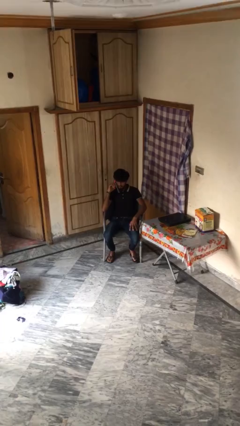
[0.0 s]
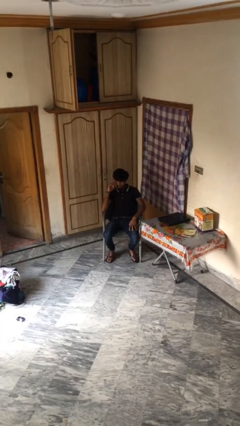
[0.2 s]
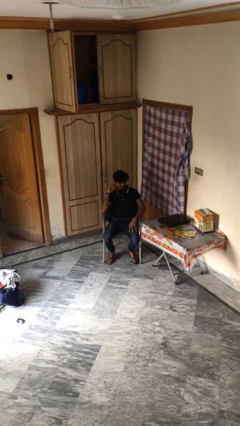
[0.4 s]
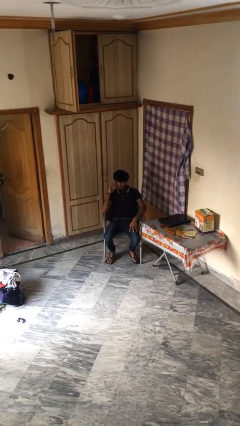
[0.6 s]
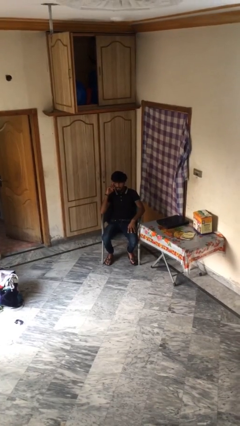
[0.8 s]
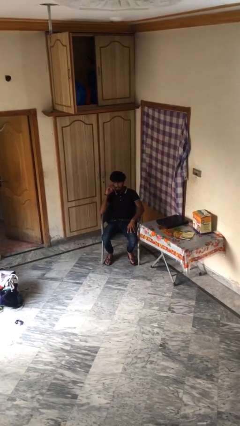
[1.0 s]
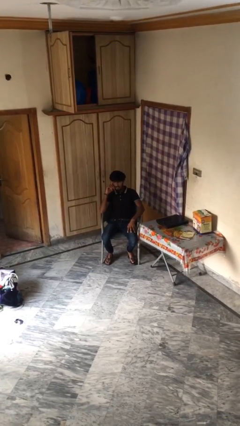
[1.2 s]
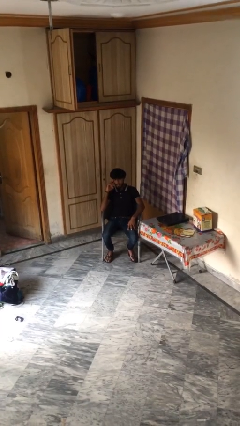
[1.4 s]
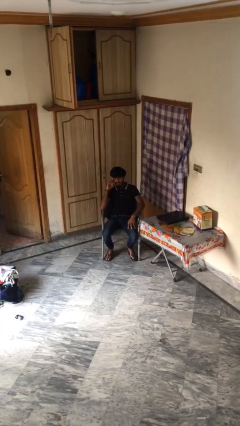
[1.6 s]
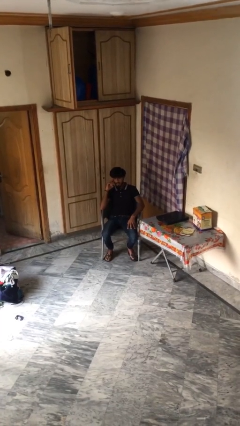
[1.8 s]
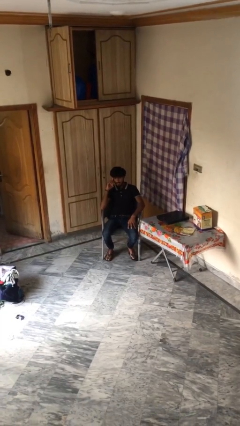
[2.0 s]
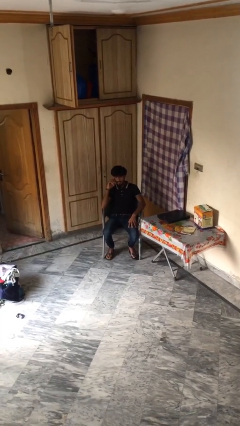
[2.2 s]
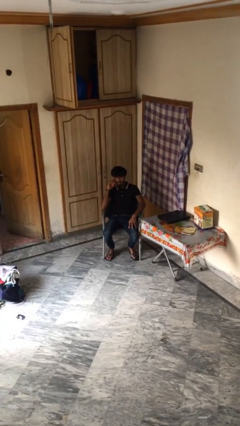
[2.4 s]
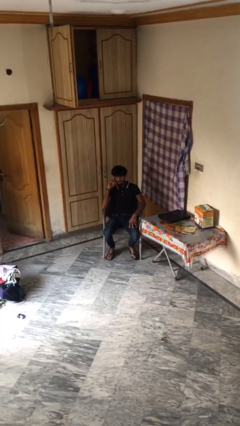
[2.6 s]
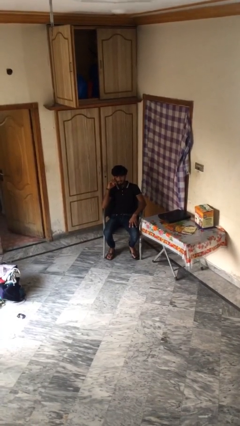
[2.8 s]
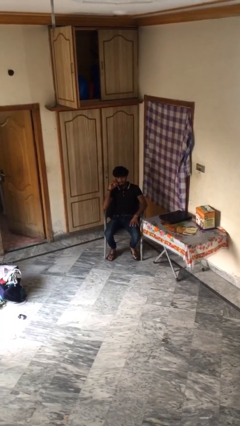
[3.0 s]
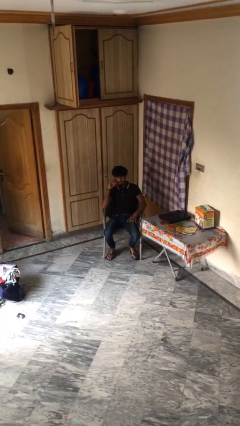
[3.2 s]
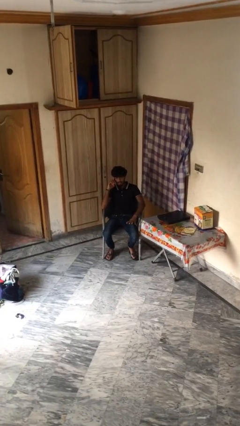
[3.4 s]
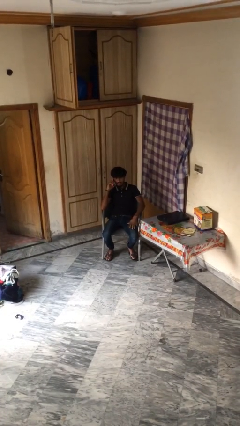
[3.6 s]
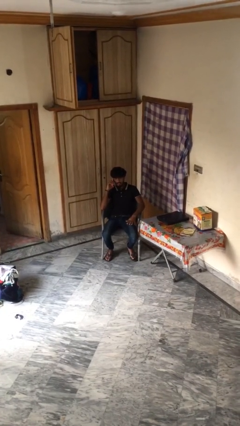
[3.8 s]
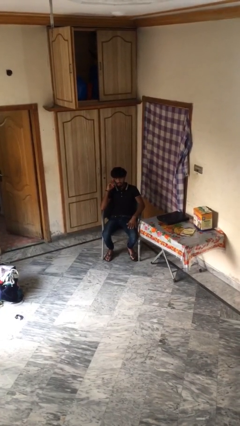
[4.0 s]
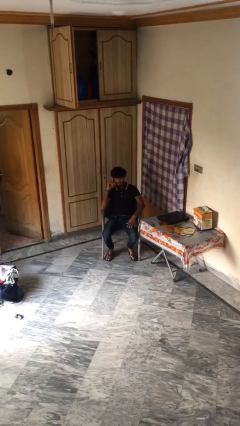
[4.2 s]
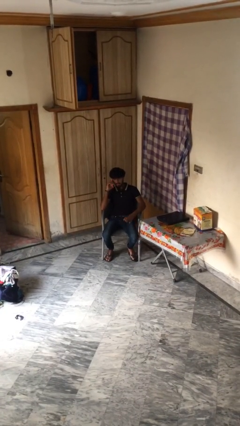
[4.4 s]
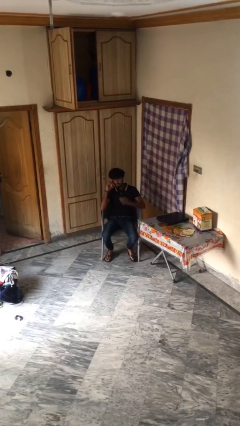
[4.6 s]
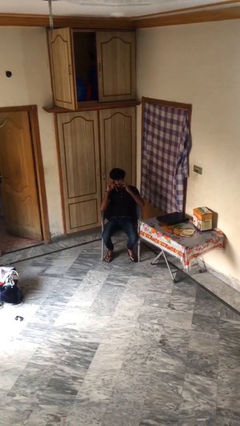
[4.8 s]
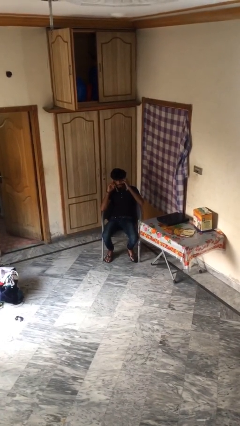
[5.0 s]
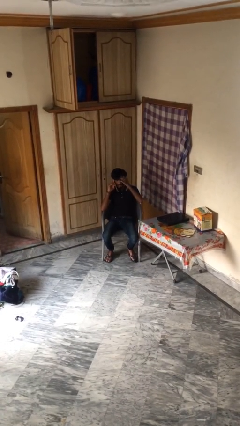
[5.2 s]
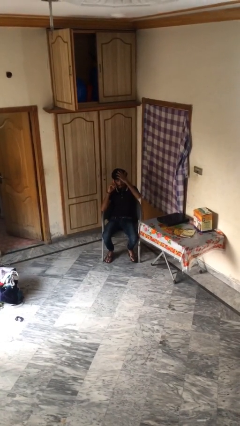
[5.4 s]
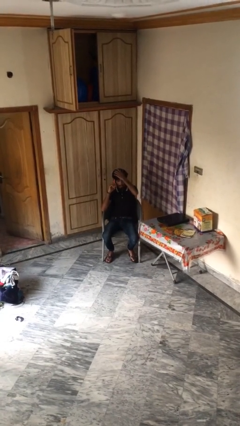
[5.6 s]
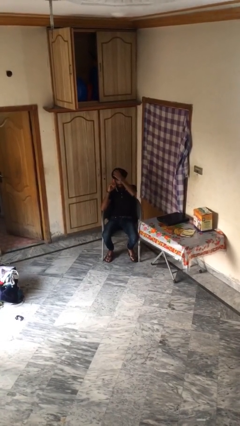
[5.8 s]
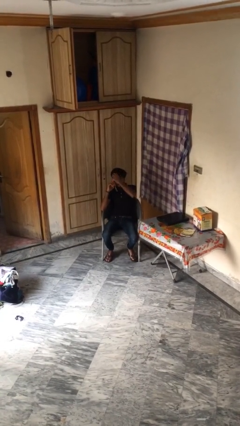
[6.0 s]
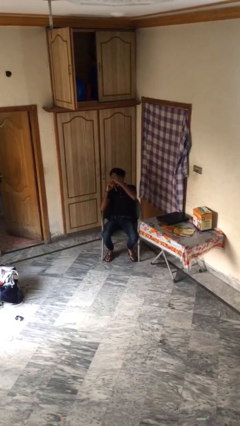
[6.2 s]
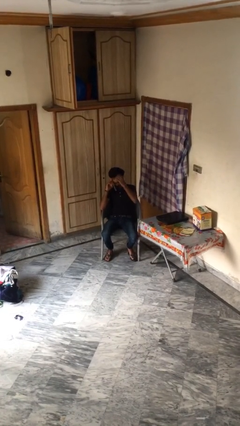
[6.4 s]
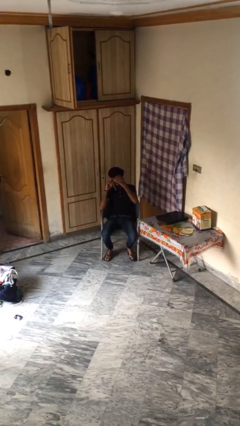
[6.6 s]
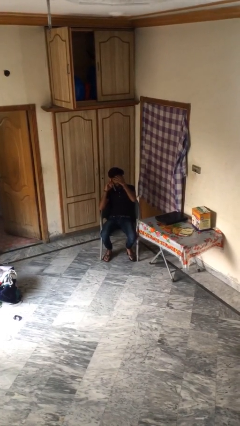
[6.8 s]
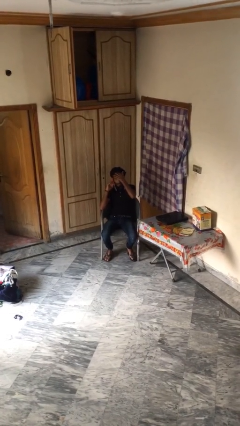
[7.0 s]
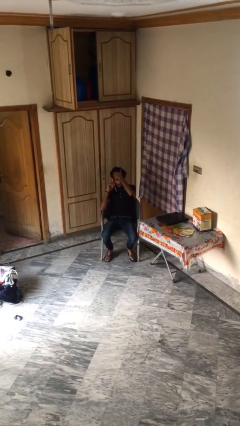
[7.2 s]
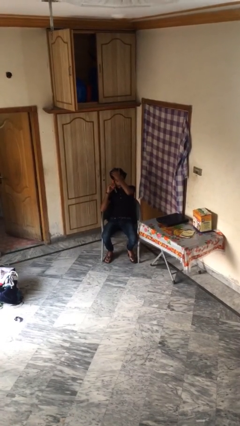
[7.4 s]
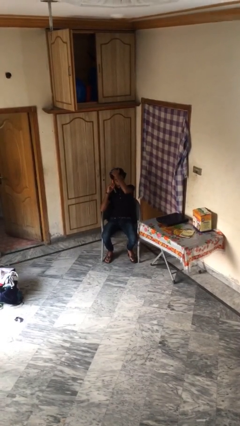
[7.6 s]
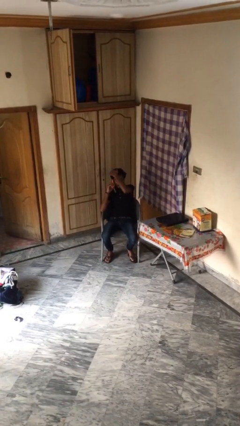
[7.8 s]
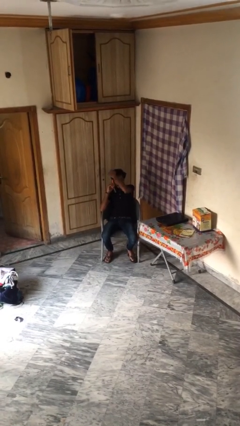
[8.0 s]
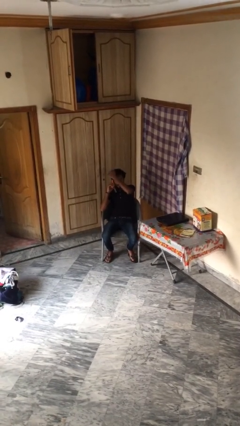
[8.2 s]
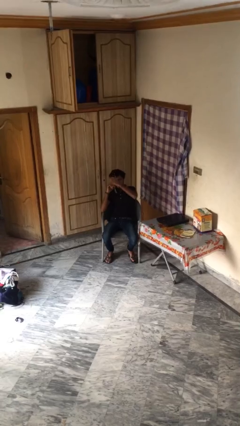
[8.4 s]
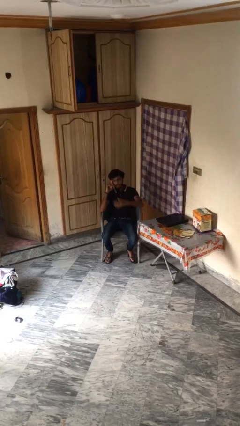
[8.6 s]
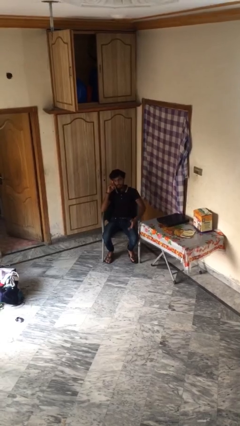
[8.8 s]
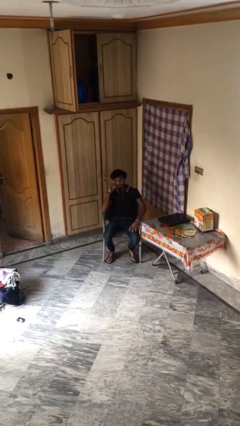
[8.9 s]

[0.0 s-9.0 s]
person talks on phone

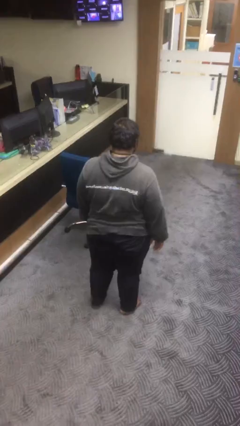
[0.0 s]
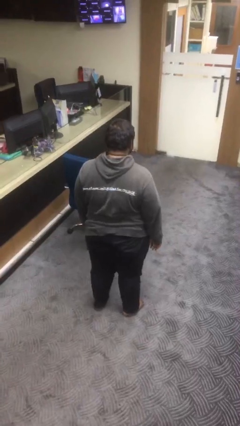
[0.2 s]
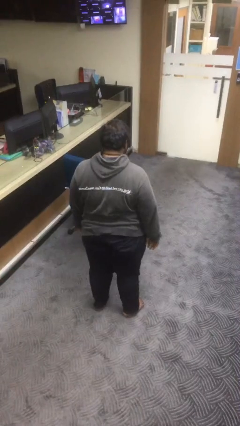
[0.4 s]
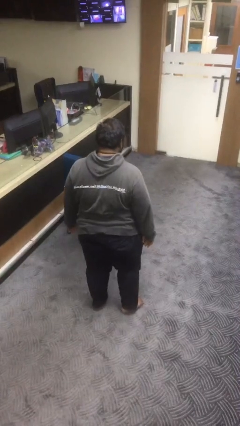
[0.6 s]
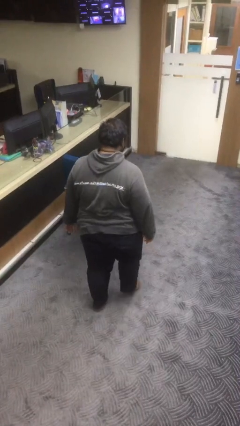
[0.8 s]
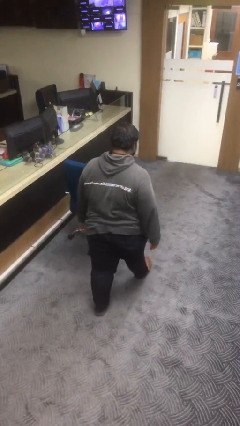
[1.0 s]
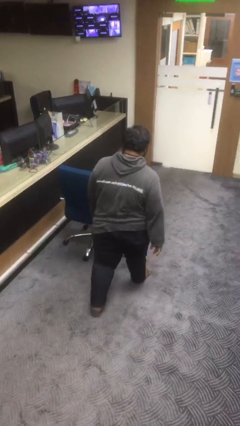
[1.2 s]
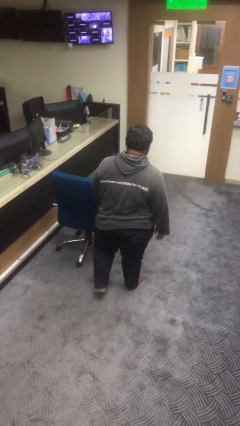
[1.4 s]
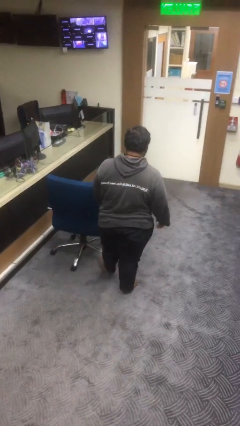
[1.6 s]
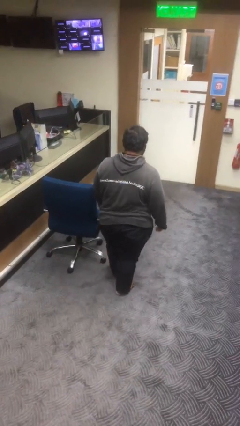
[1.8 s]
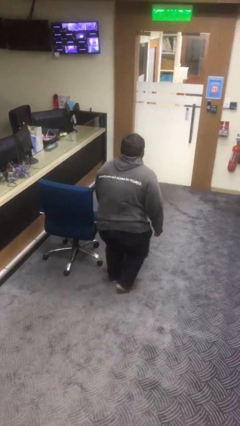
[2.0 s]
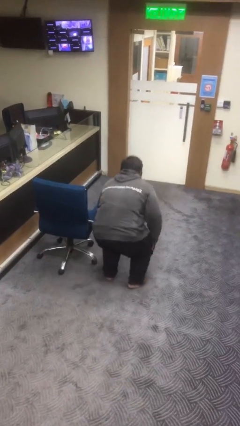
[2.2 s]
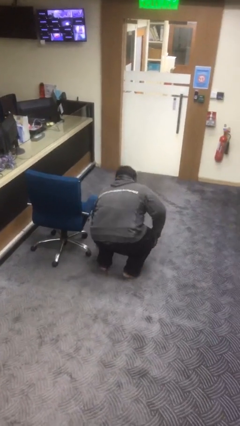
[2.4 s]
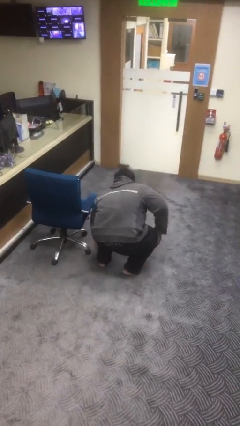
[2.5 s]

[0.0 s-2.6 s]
person stubs toe

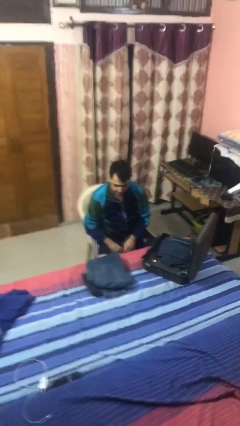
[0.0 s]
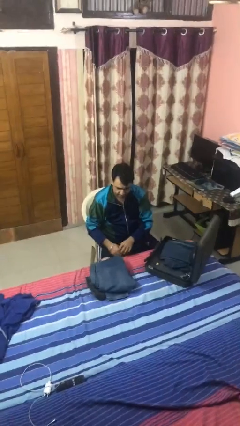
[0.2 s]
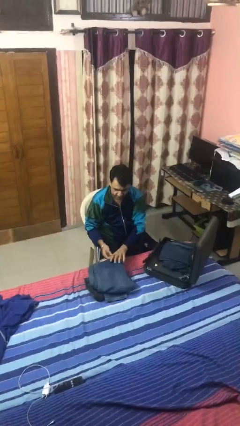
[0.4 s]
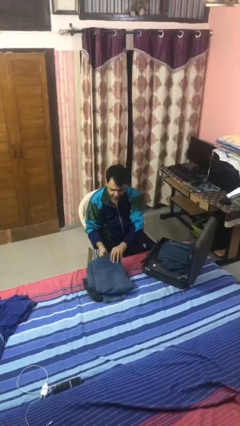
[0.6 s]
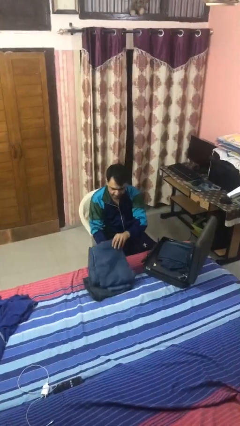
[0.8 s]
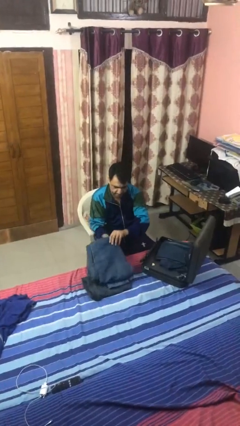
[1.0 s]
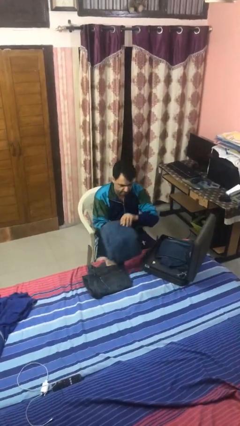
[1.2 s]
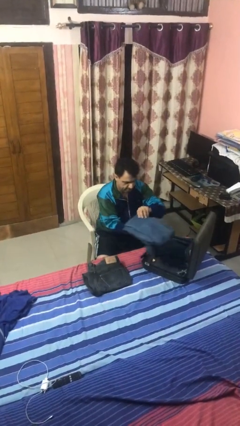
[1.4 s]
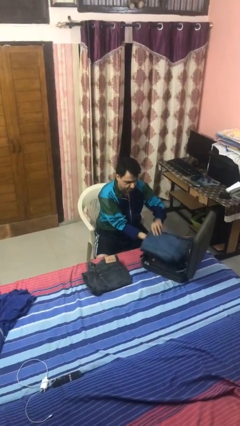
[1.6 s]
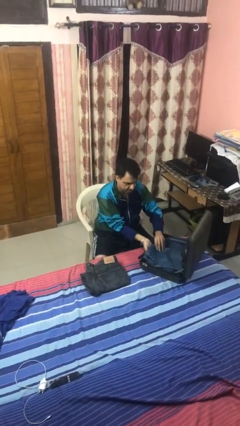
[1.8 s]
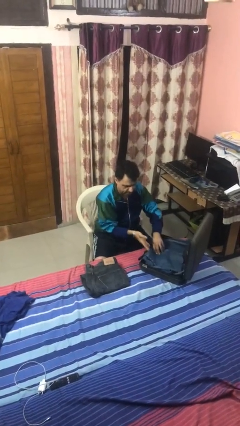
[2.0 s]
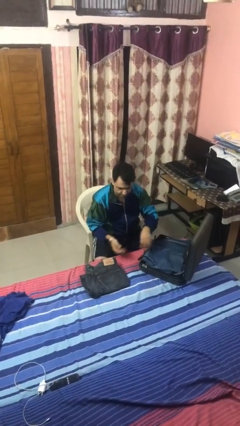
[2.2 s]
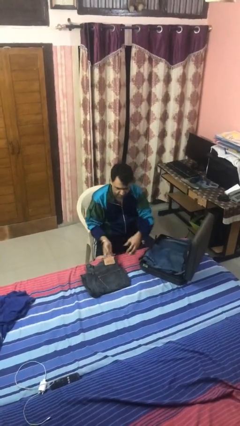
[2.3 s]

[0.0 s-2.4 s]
person loads clothes into suitcase

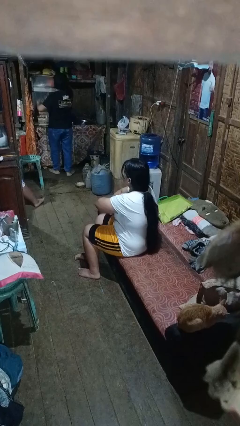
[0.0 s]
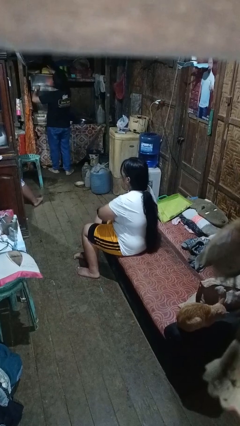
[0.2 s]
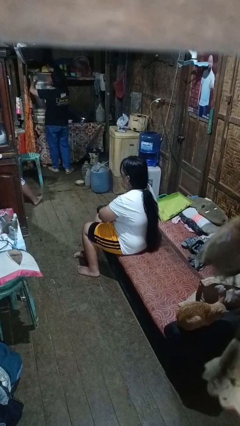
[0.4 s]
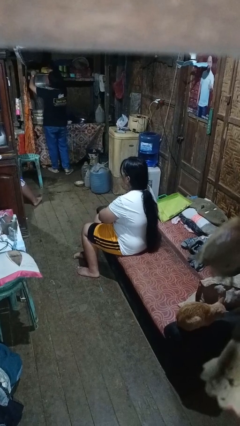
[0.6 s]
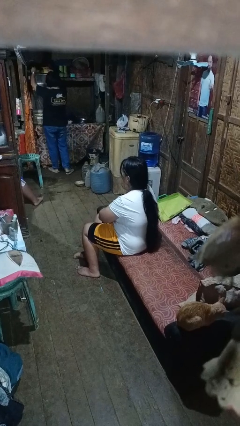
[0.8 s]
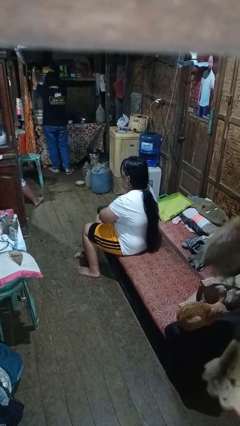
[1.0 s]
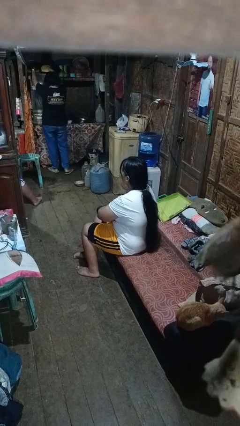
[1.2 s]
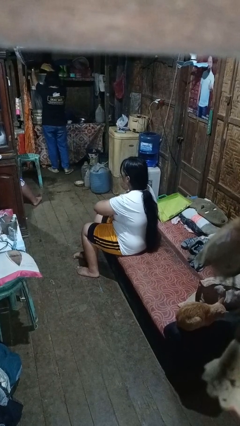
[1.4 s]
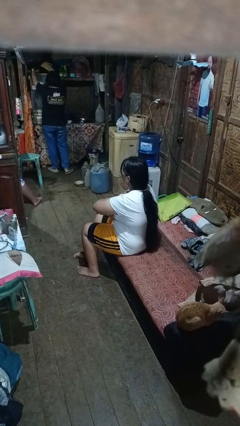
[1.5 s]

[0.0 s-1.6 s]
person gestures arms x

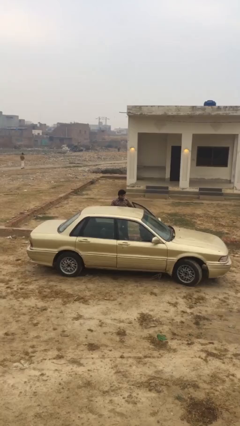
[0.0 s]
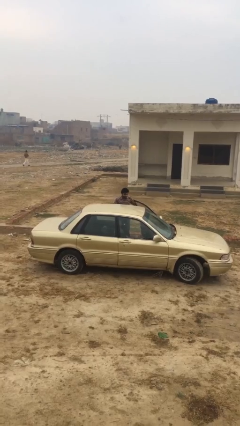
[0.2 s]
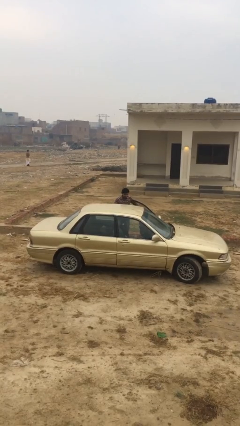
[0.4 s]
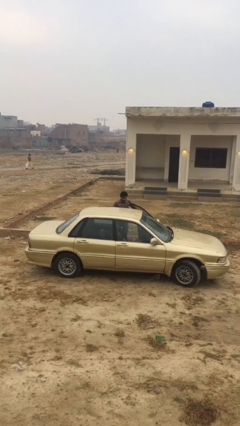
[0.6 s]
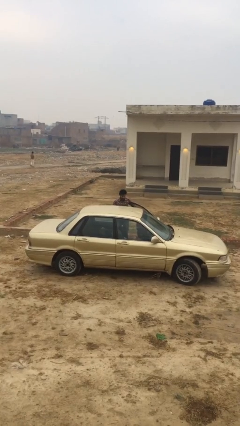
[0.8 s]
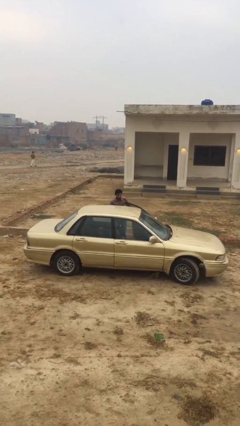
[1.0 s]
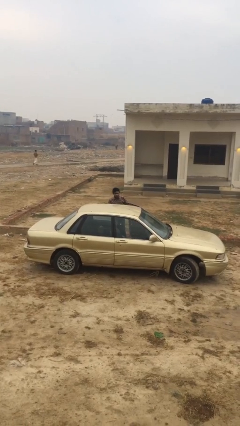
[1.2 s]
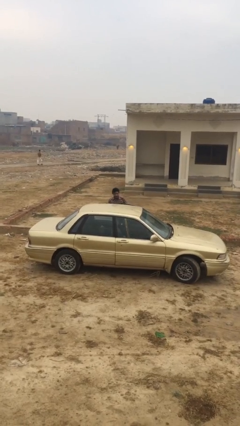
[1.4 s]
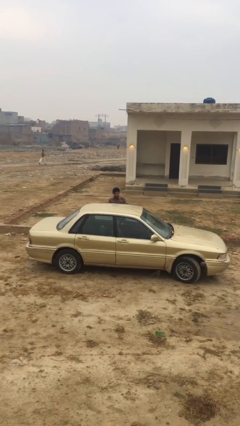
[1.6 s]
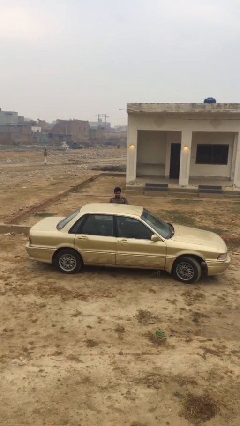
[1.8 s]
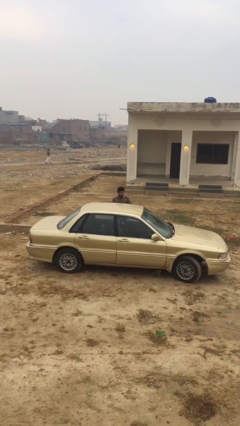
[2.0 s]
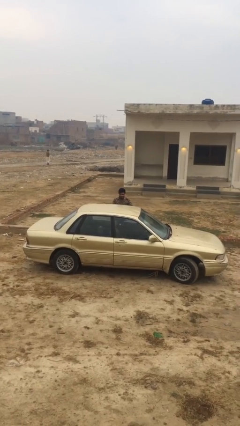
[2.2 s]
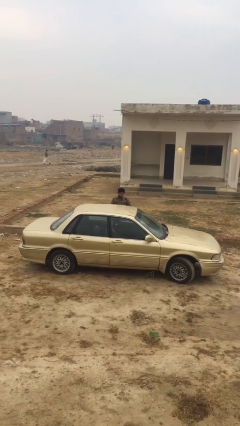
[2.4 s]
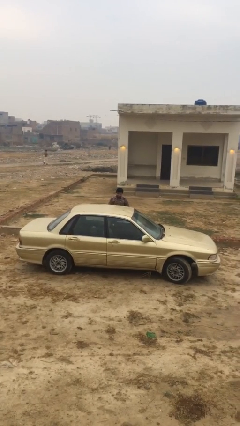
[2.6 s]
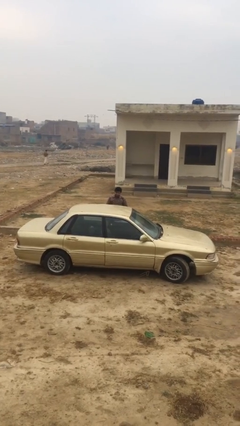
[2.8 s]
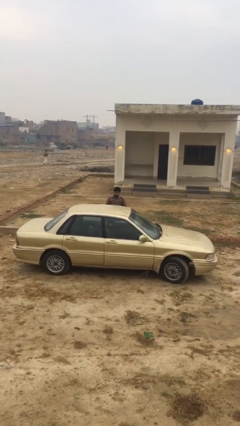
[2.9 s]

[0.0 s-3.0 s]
person closes car door
